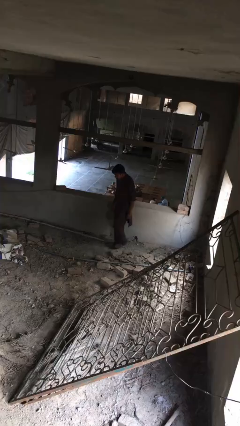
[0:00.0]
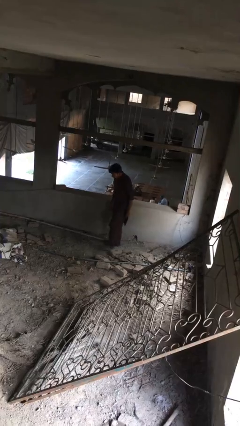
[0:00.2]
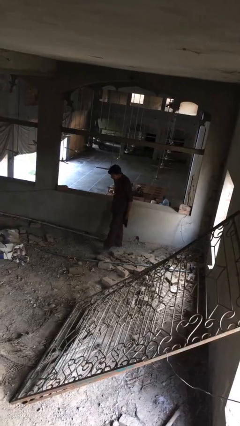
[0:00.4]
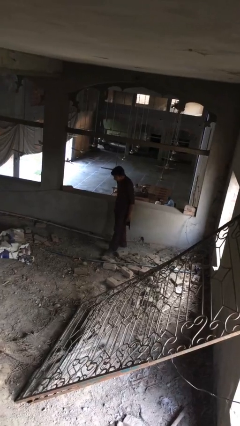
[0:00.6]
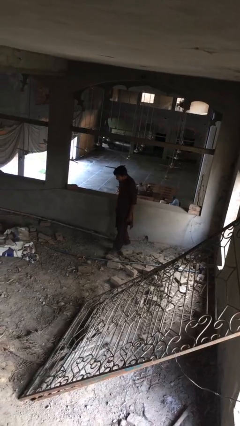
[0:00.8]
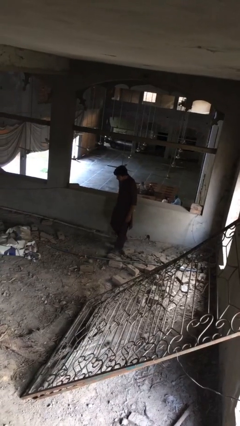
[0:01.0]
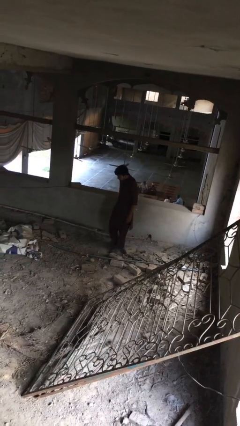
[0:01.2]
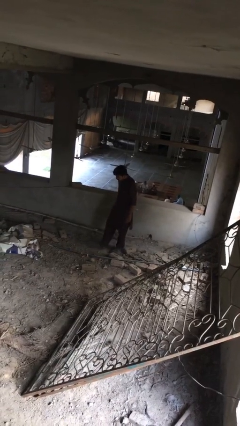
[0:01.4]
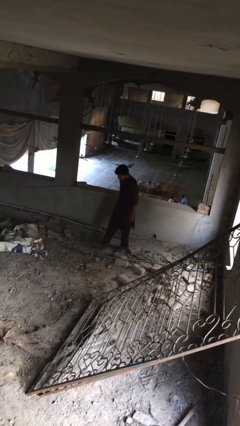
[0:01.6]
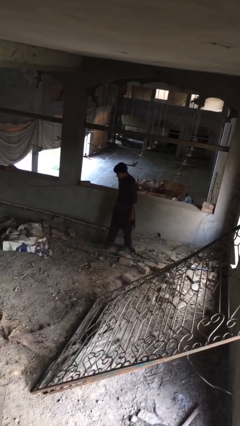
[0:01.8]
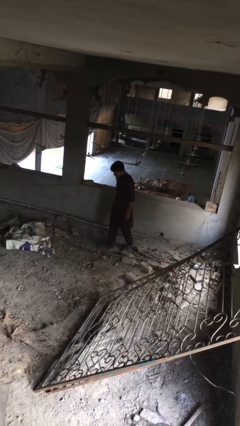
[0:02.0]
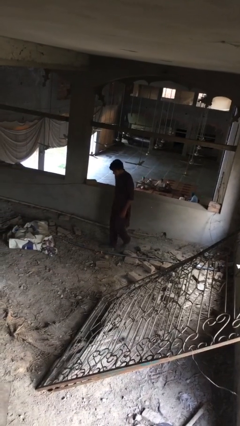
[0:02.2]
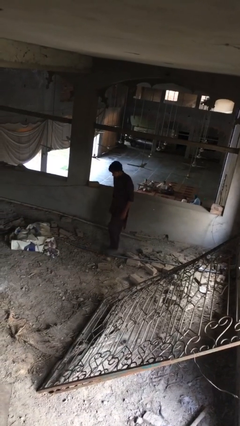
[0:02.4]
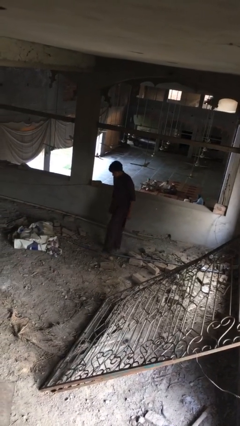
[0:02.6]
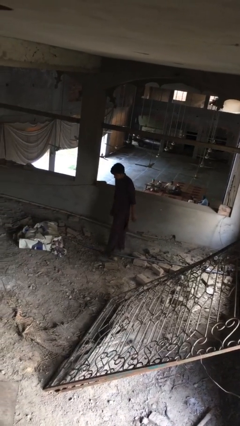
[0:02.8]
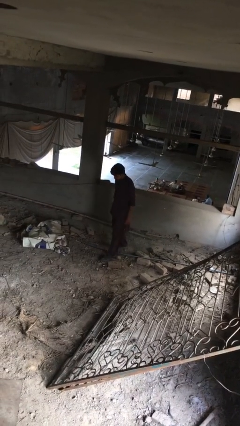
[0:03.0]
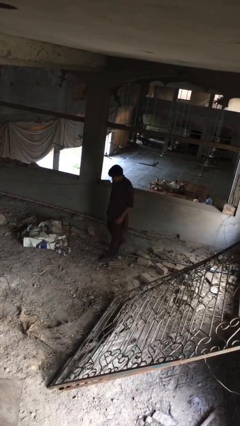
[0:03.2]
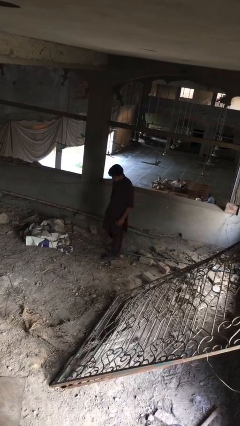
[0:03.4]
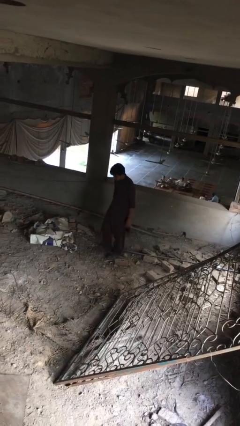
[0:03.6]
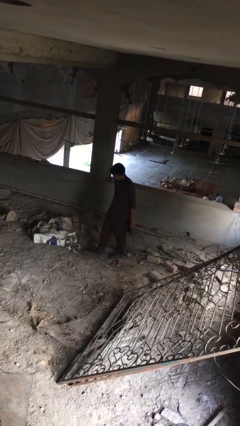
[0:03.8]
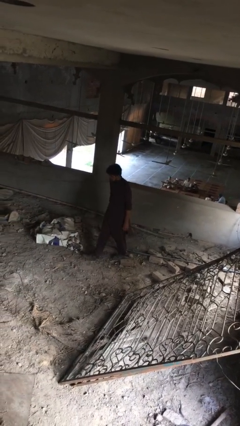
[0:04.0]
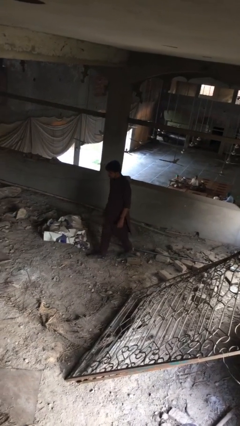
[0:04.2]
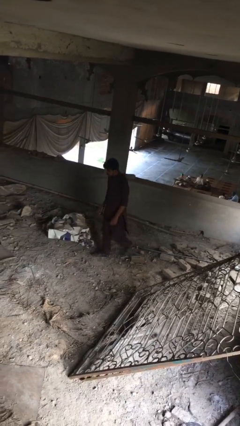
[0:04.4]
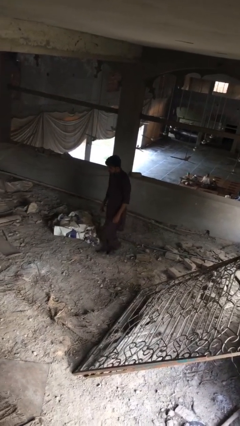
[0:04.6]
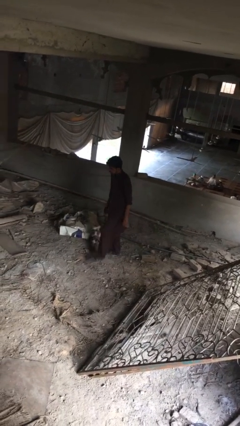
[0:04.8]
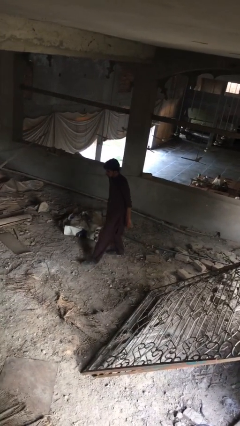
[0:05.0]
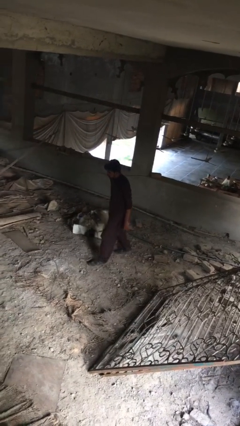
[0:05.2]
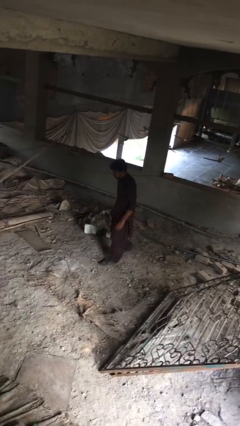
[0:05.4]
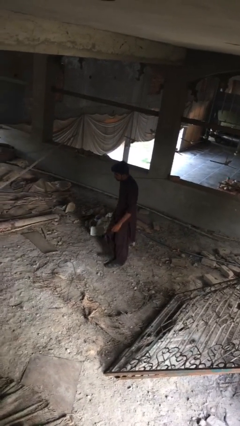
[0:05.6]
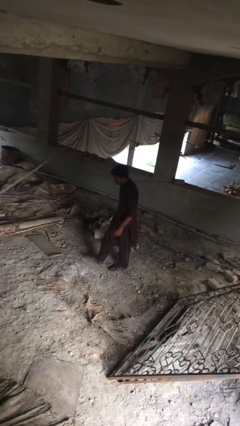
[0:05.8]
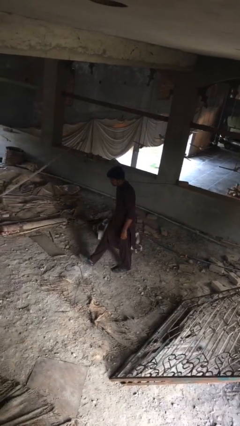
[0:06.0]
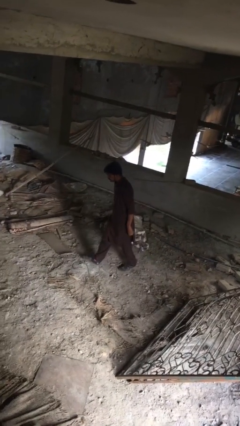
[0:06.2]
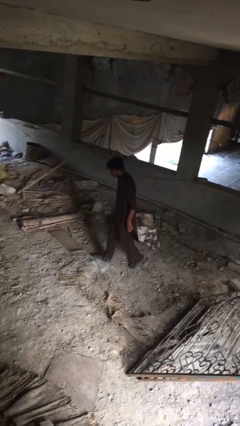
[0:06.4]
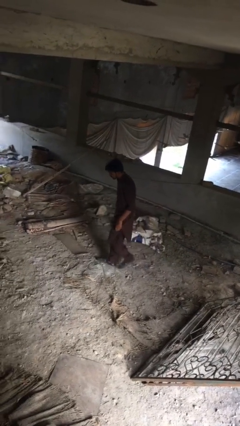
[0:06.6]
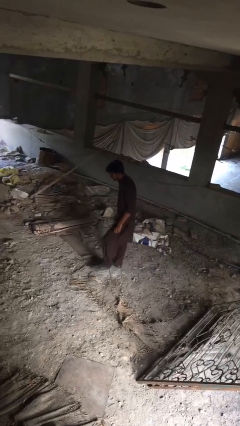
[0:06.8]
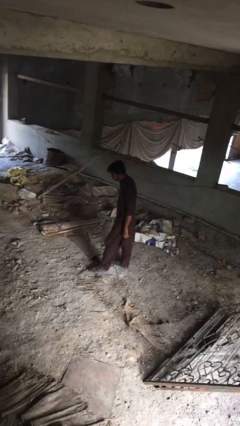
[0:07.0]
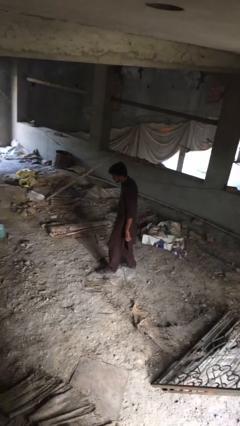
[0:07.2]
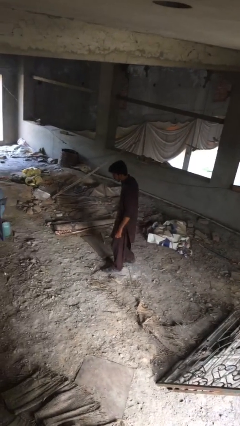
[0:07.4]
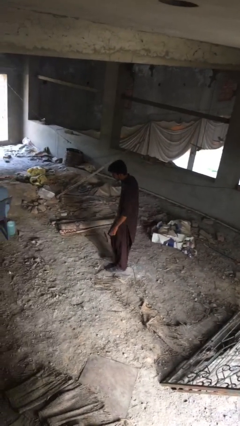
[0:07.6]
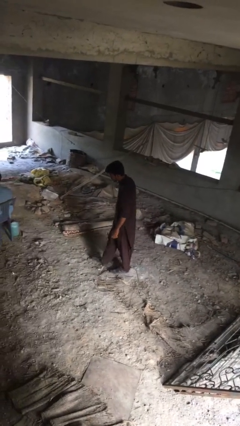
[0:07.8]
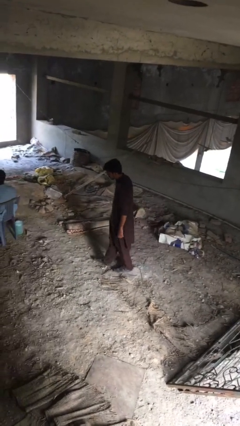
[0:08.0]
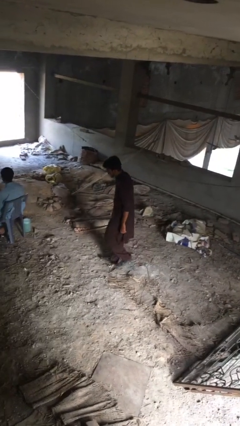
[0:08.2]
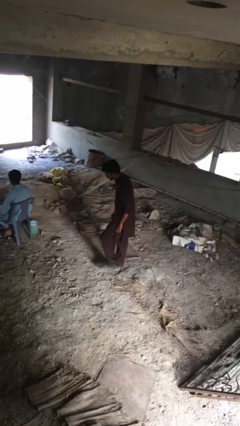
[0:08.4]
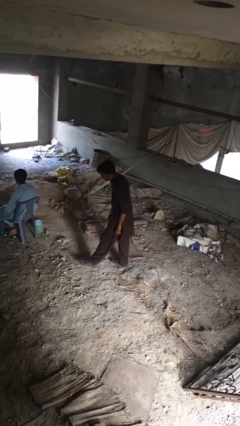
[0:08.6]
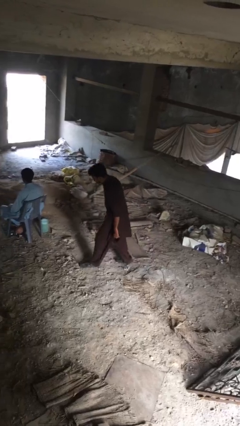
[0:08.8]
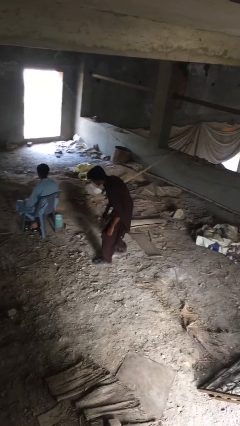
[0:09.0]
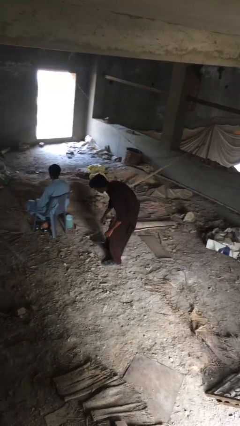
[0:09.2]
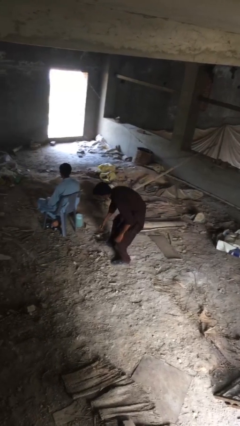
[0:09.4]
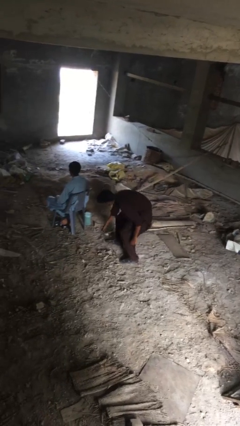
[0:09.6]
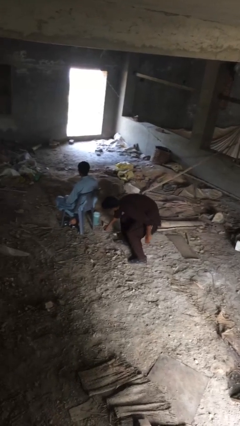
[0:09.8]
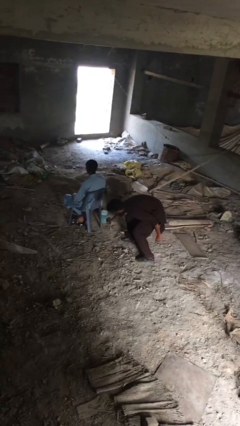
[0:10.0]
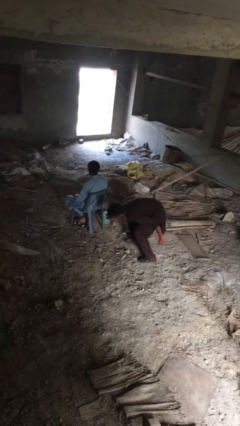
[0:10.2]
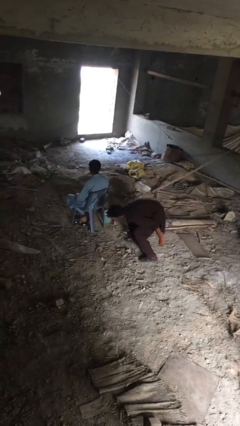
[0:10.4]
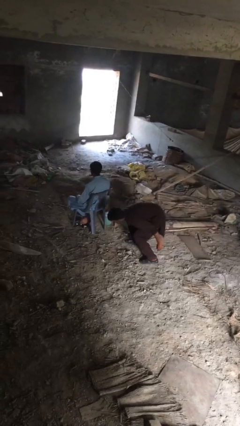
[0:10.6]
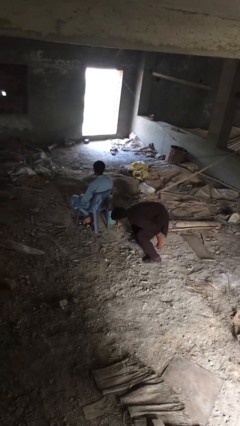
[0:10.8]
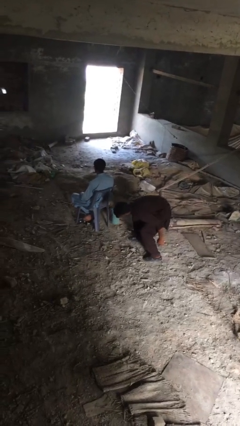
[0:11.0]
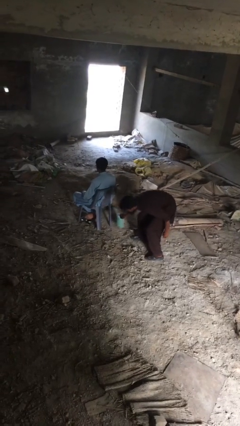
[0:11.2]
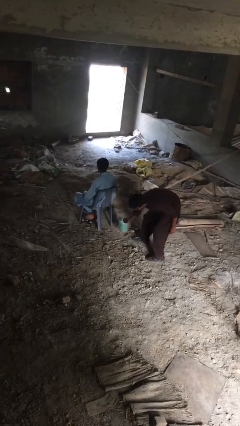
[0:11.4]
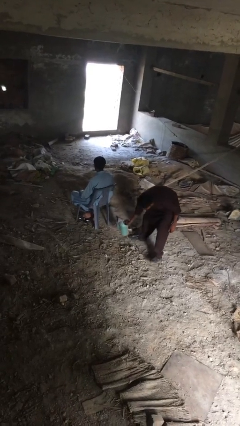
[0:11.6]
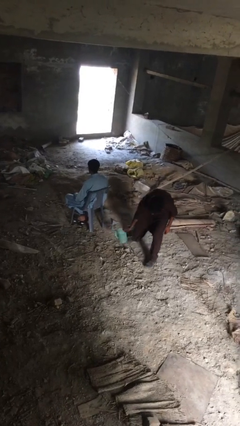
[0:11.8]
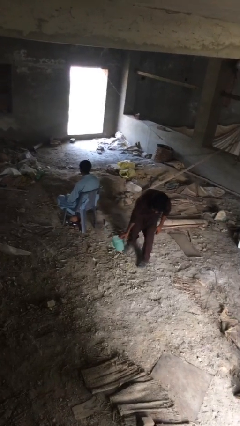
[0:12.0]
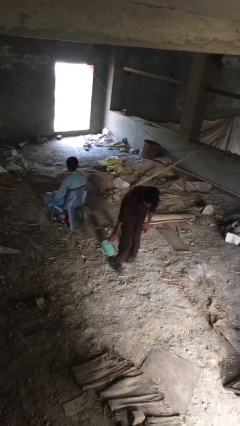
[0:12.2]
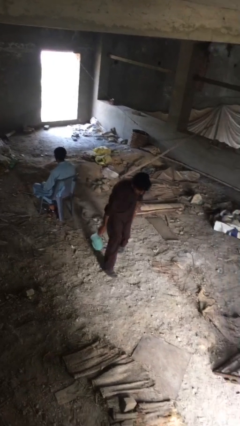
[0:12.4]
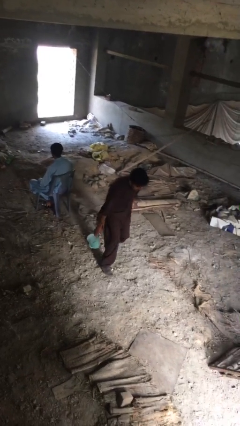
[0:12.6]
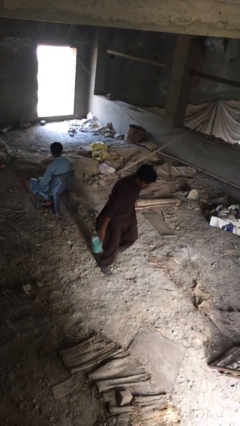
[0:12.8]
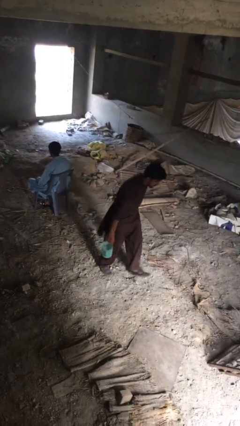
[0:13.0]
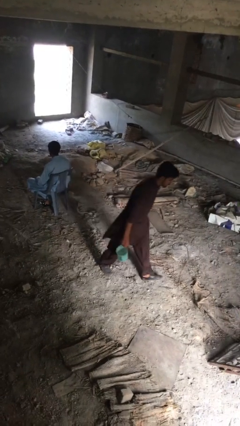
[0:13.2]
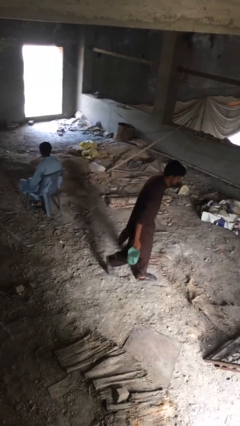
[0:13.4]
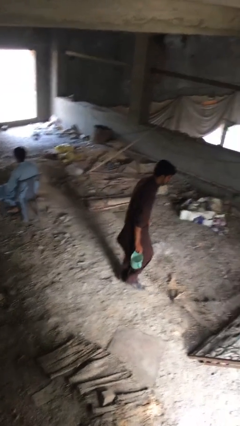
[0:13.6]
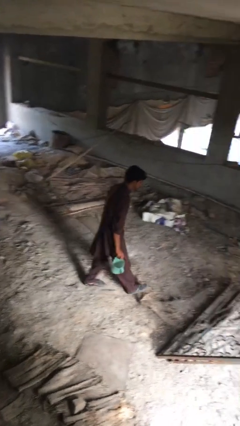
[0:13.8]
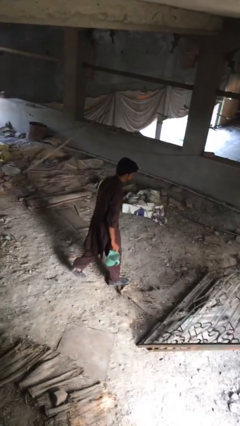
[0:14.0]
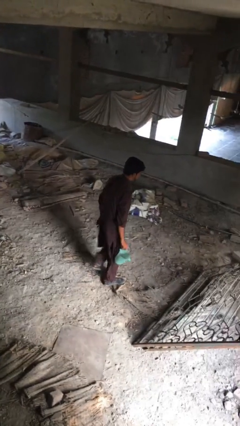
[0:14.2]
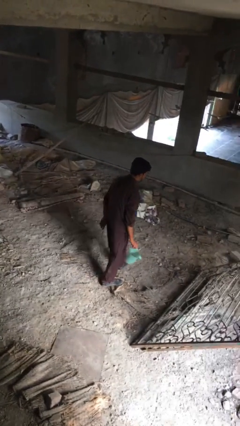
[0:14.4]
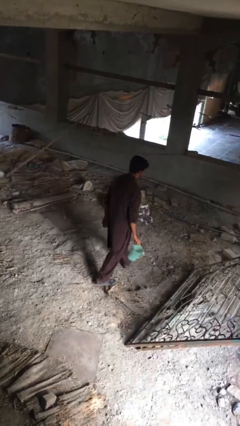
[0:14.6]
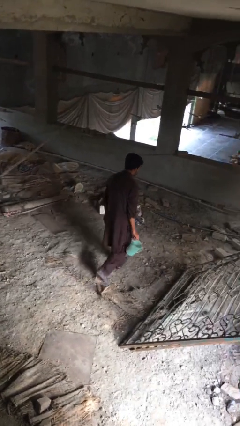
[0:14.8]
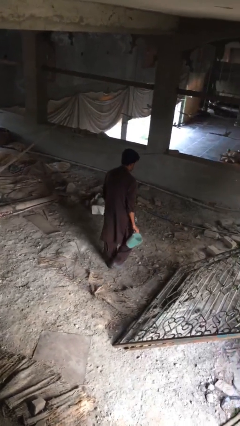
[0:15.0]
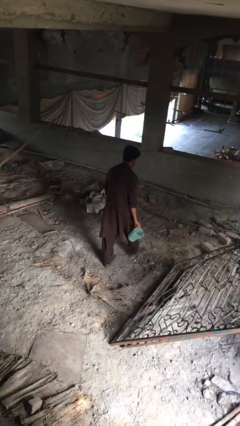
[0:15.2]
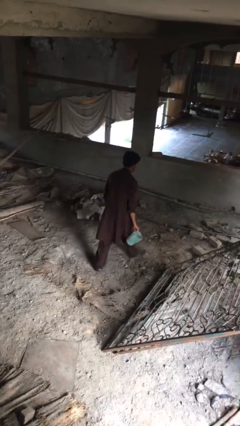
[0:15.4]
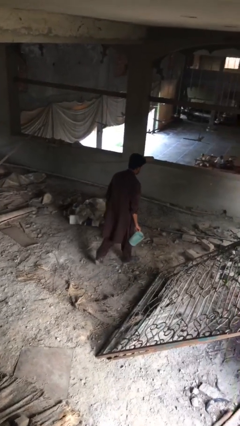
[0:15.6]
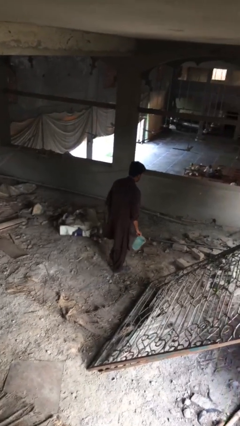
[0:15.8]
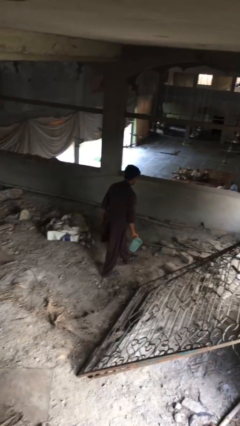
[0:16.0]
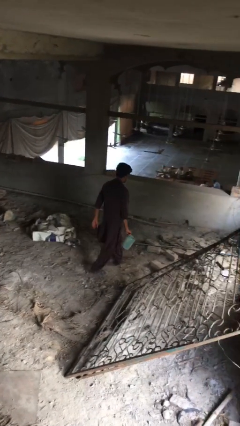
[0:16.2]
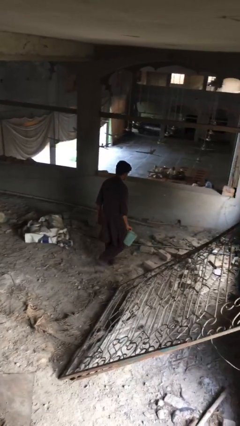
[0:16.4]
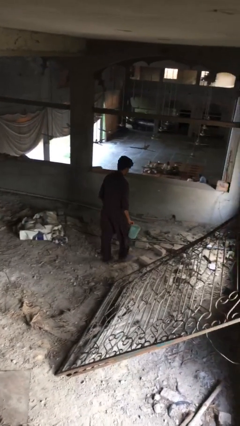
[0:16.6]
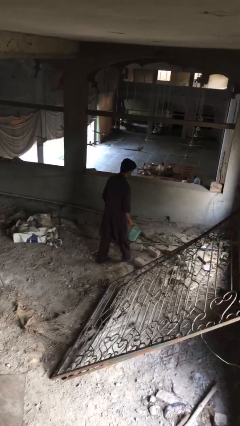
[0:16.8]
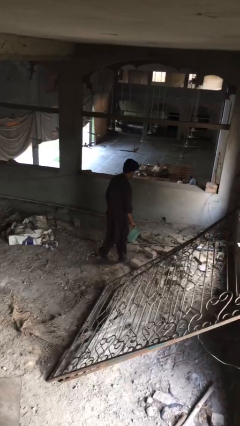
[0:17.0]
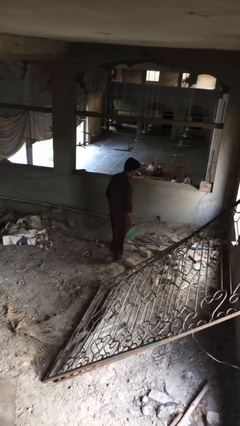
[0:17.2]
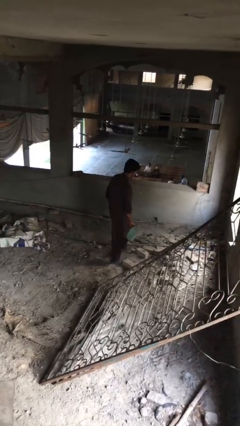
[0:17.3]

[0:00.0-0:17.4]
person steals object from person

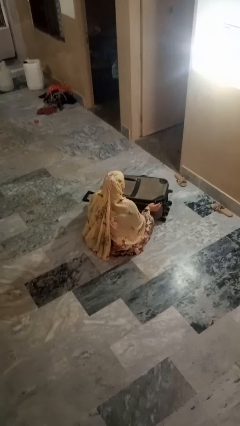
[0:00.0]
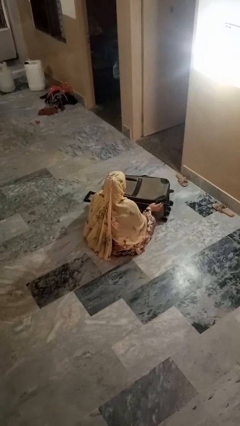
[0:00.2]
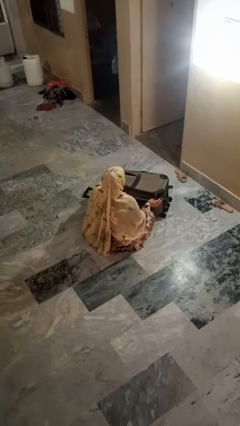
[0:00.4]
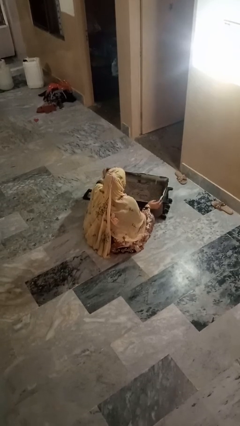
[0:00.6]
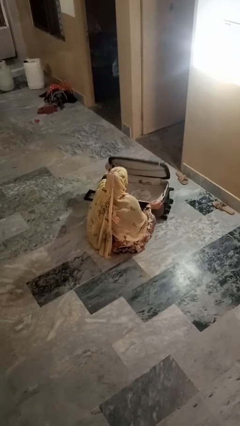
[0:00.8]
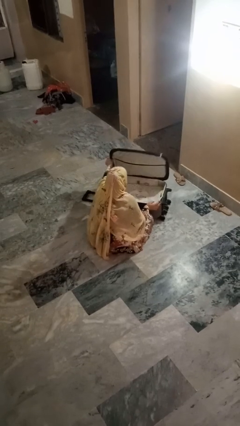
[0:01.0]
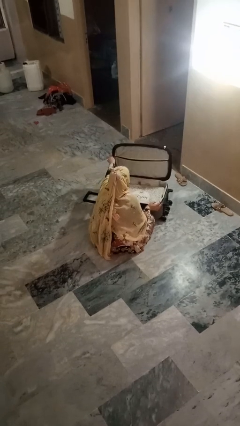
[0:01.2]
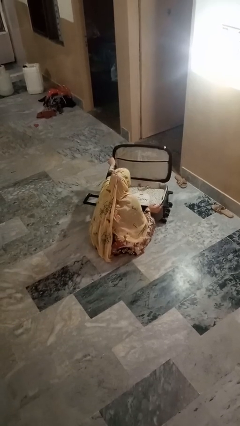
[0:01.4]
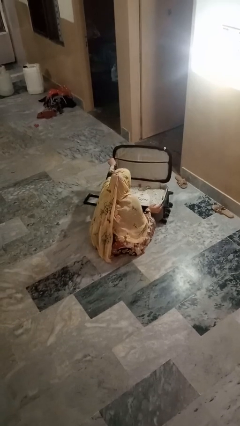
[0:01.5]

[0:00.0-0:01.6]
person opens suitcase
